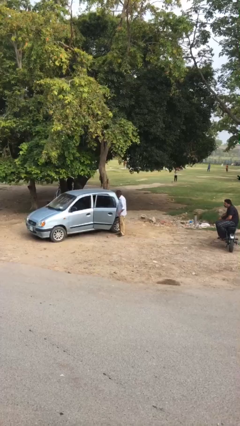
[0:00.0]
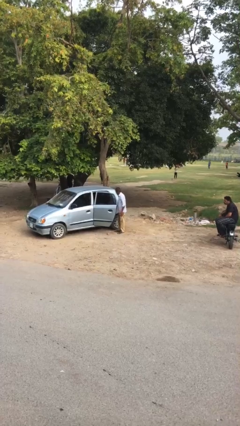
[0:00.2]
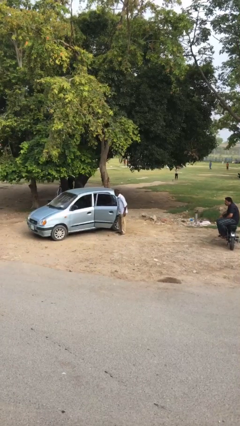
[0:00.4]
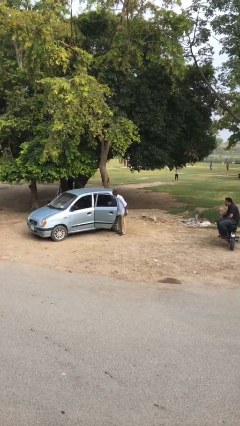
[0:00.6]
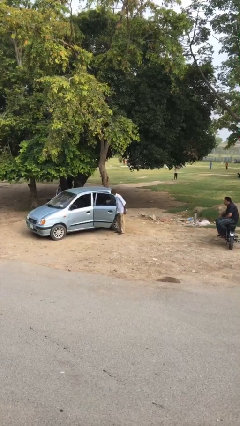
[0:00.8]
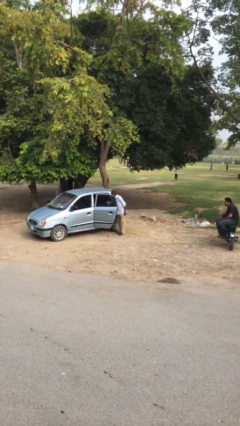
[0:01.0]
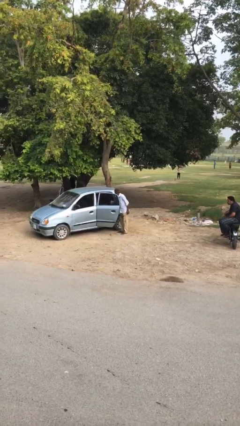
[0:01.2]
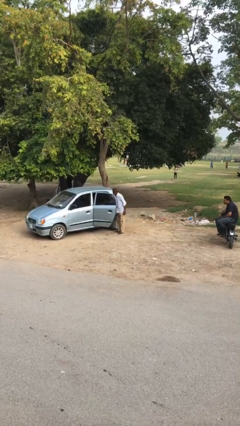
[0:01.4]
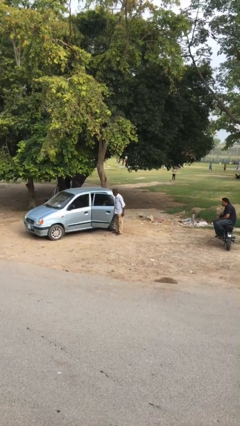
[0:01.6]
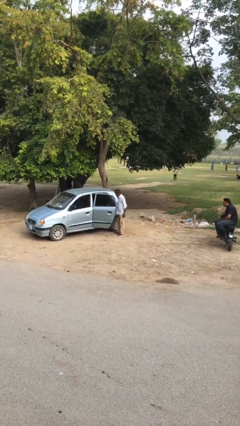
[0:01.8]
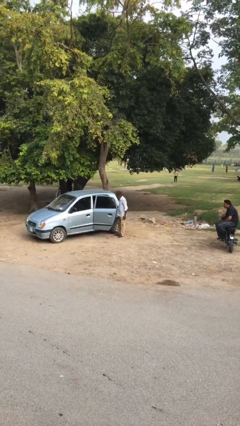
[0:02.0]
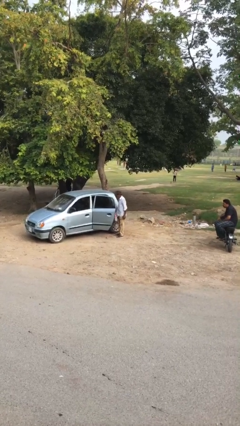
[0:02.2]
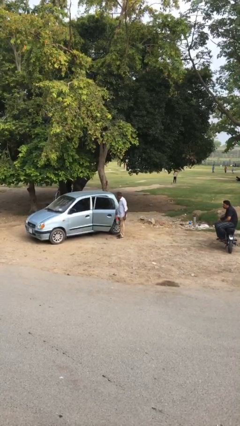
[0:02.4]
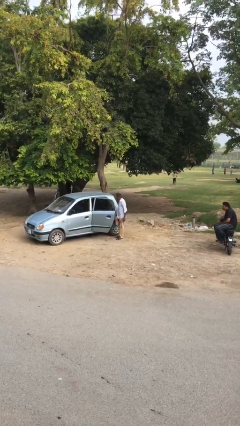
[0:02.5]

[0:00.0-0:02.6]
person unloads car

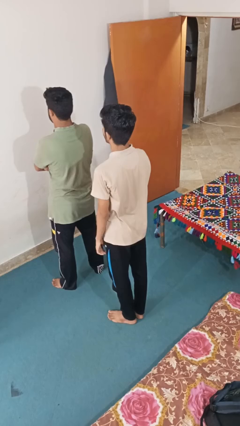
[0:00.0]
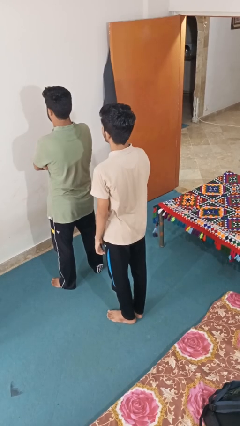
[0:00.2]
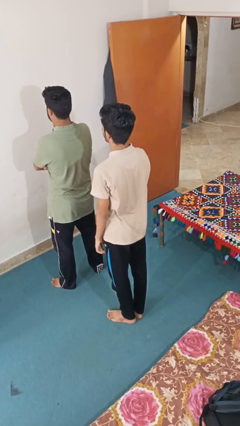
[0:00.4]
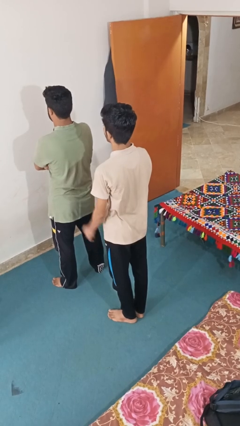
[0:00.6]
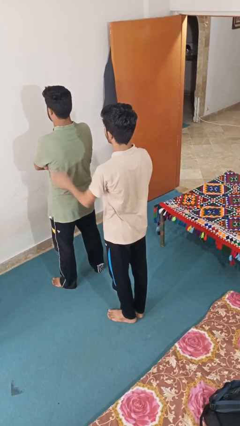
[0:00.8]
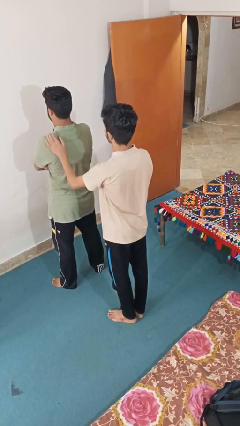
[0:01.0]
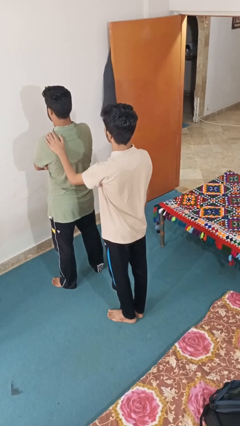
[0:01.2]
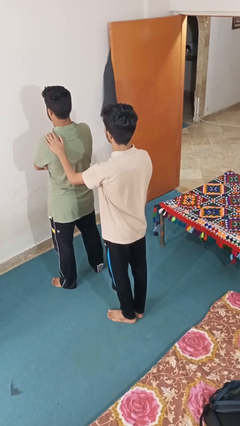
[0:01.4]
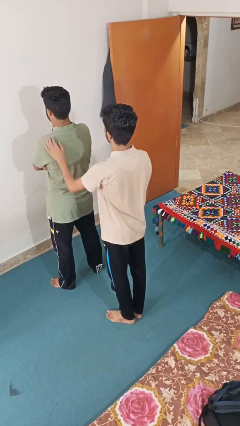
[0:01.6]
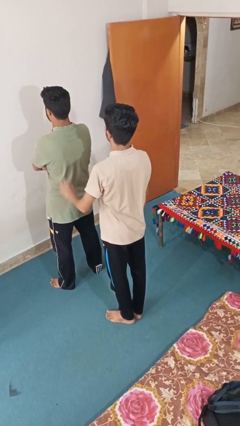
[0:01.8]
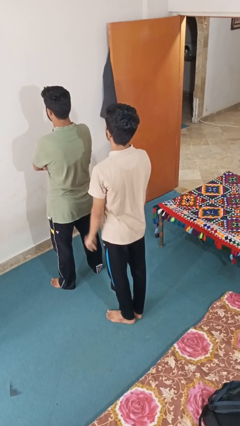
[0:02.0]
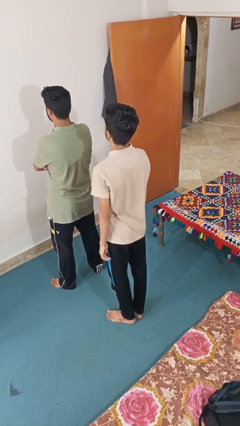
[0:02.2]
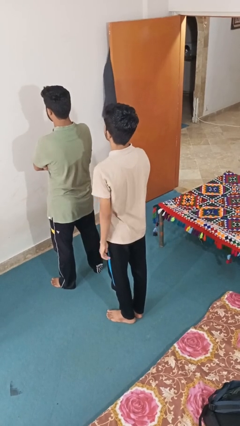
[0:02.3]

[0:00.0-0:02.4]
person touches back of person

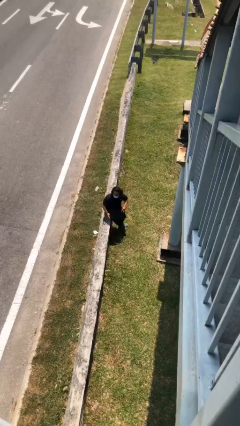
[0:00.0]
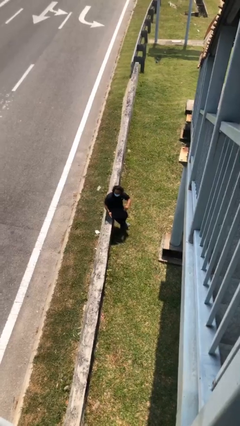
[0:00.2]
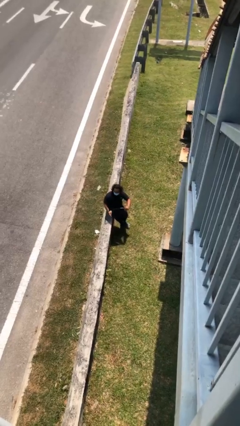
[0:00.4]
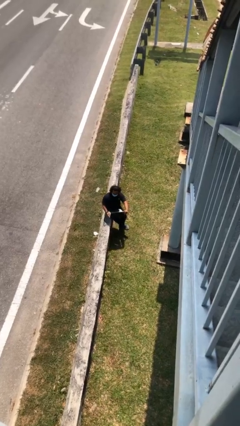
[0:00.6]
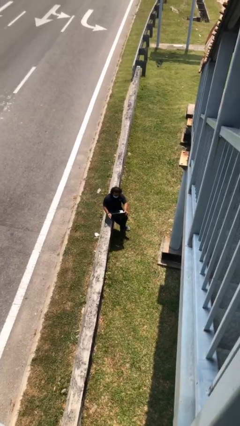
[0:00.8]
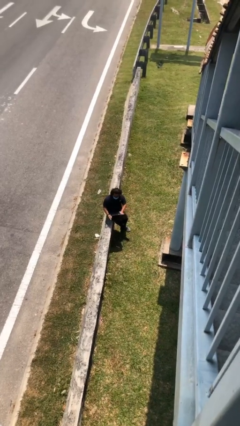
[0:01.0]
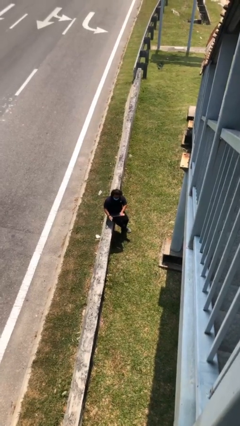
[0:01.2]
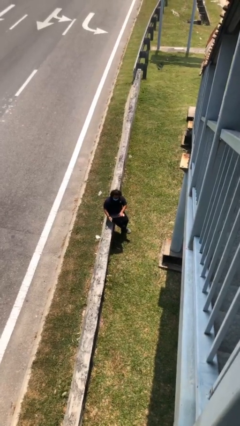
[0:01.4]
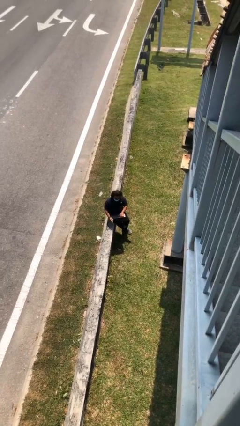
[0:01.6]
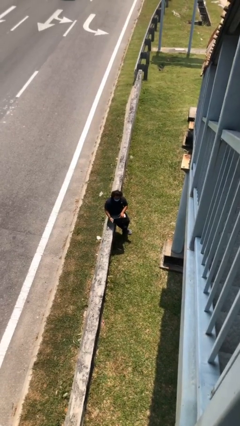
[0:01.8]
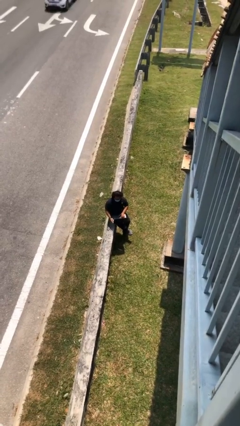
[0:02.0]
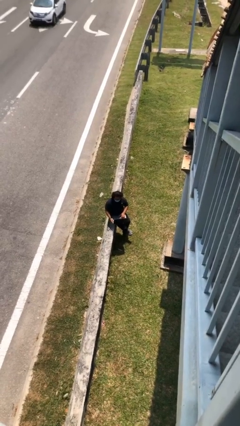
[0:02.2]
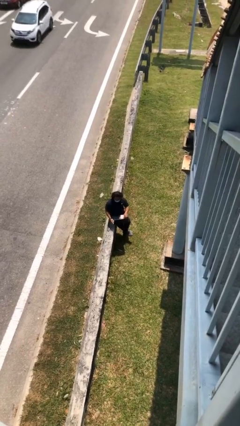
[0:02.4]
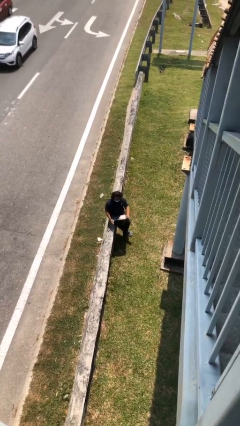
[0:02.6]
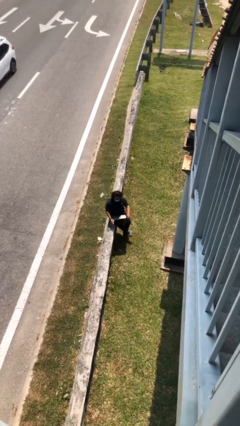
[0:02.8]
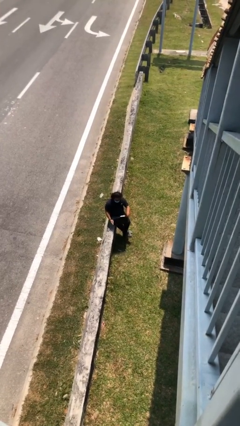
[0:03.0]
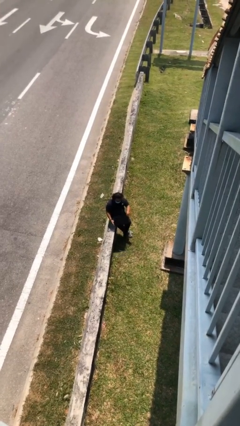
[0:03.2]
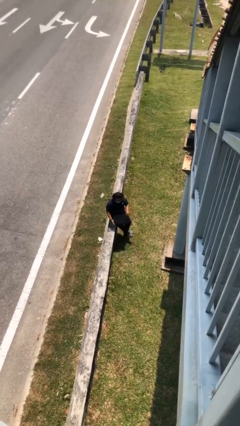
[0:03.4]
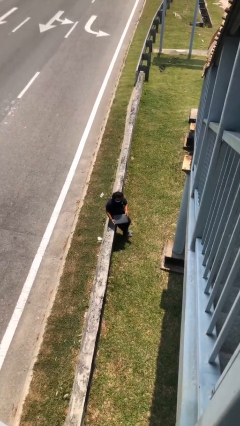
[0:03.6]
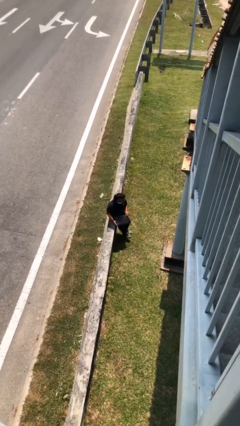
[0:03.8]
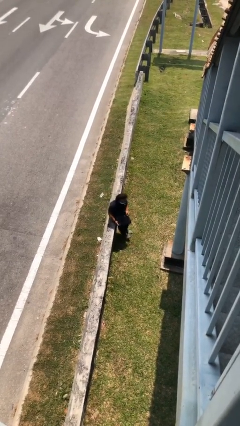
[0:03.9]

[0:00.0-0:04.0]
person interacts with laptop

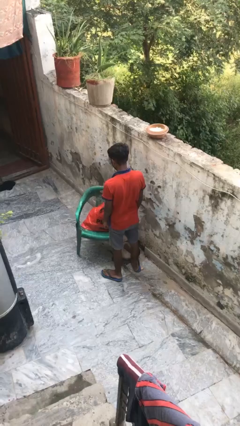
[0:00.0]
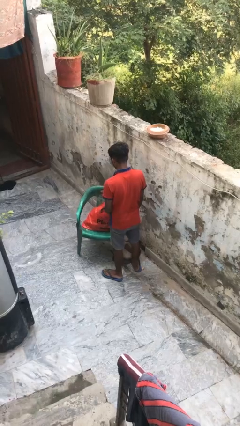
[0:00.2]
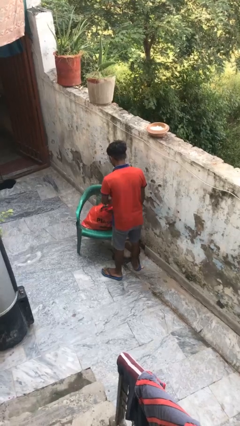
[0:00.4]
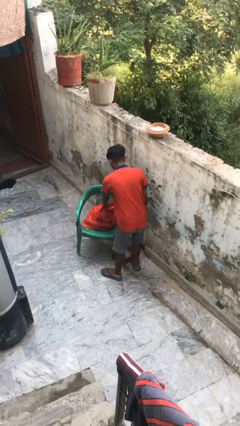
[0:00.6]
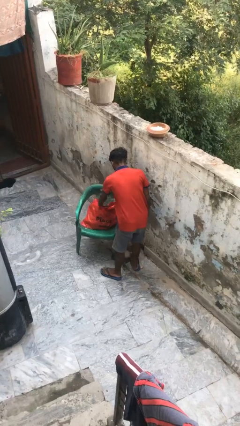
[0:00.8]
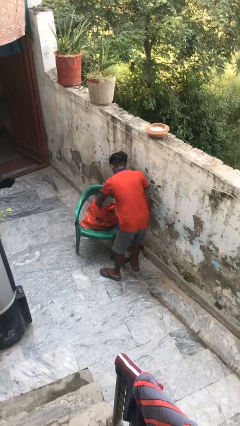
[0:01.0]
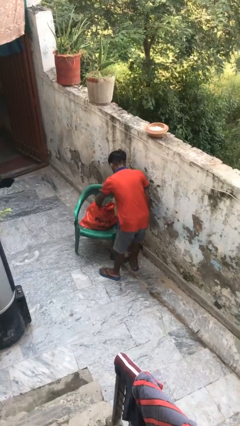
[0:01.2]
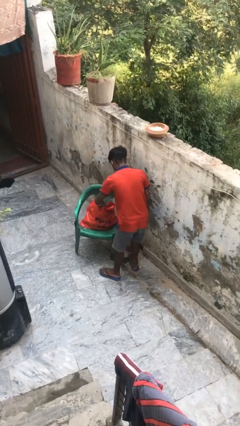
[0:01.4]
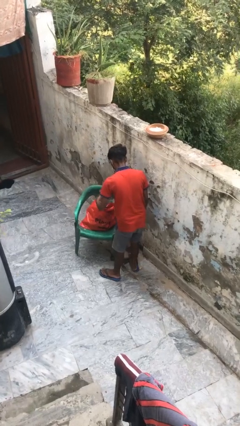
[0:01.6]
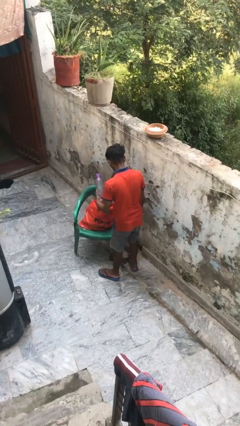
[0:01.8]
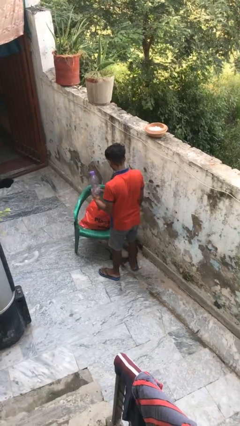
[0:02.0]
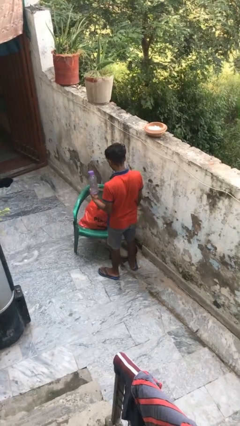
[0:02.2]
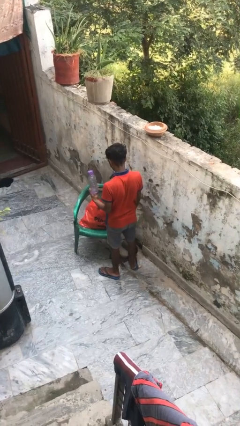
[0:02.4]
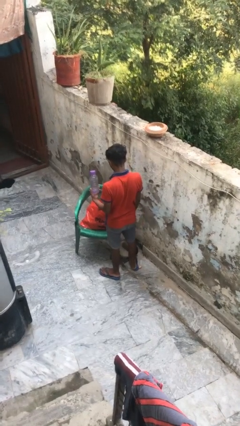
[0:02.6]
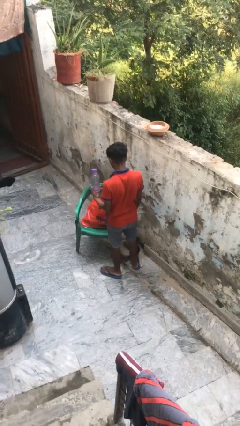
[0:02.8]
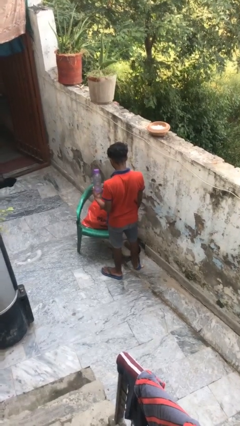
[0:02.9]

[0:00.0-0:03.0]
person takes object from bag

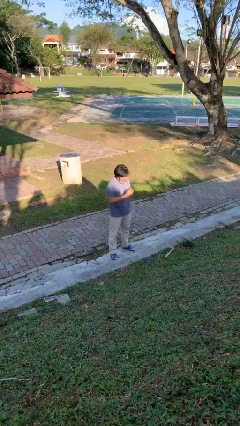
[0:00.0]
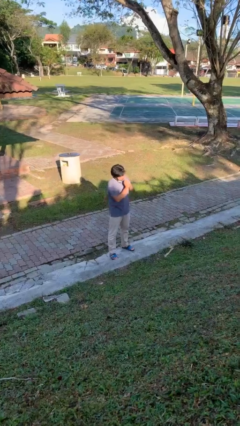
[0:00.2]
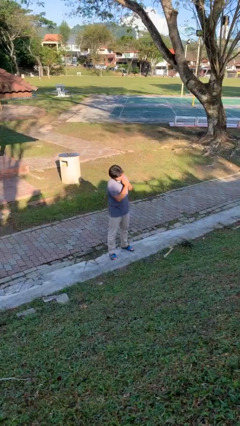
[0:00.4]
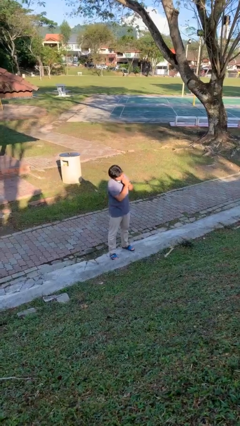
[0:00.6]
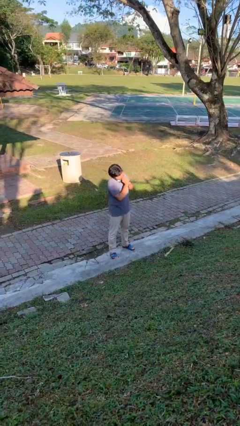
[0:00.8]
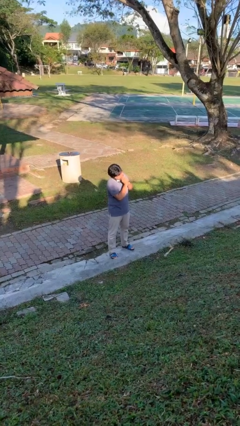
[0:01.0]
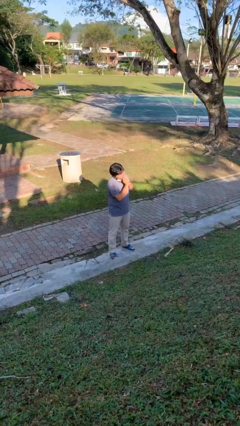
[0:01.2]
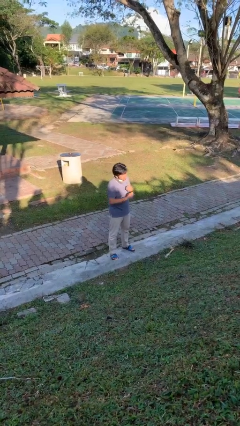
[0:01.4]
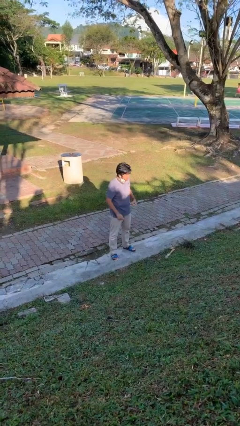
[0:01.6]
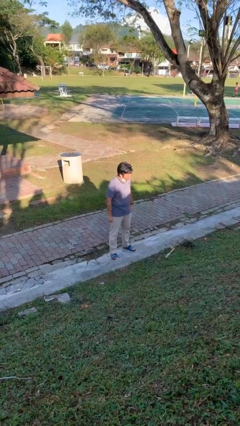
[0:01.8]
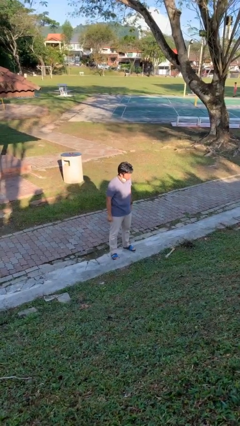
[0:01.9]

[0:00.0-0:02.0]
person flosses

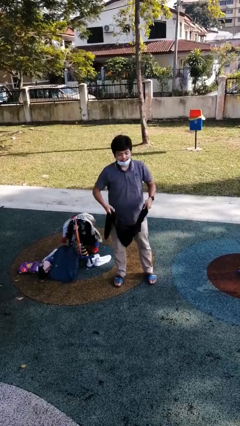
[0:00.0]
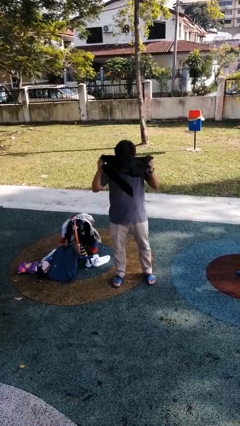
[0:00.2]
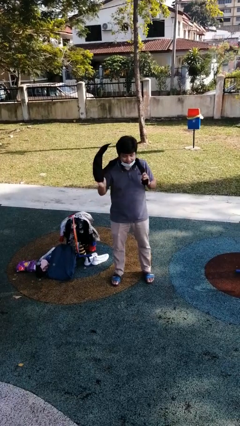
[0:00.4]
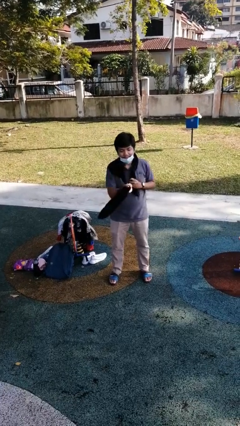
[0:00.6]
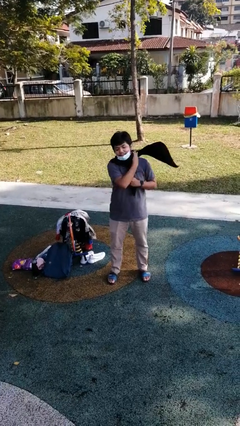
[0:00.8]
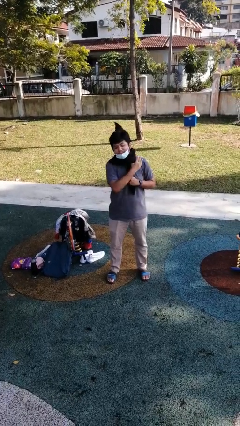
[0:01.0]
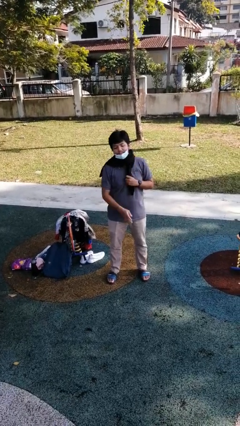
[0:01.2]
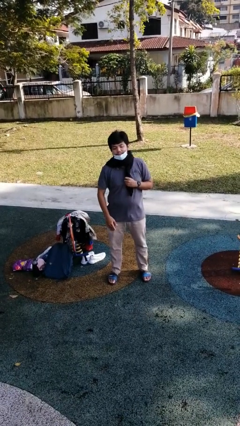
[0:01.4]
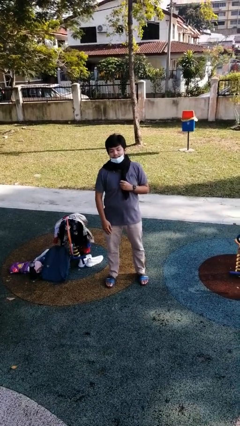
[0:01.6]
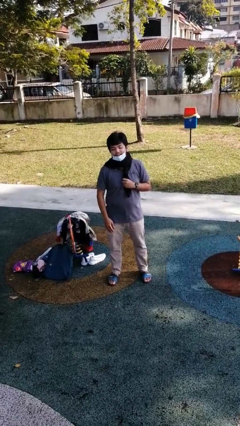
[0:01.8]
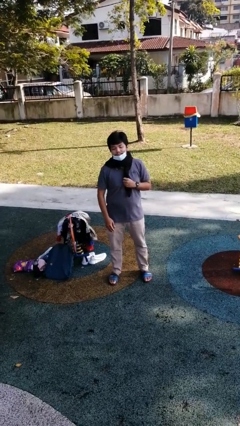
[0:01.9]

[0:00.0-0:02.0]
person puts on scarf

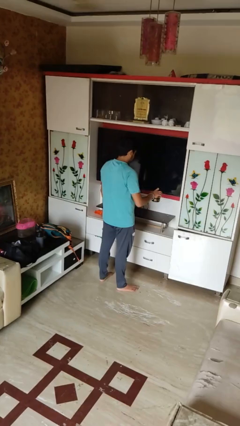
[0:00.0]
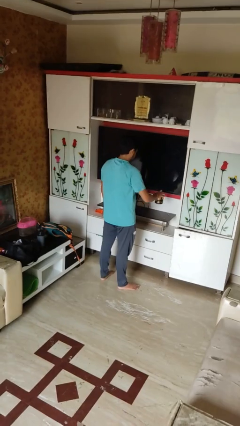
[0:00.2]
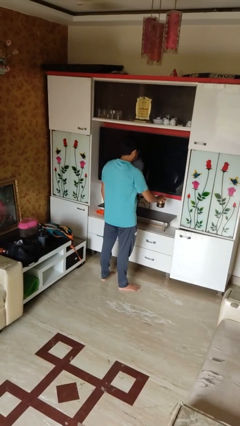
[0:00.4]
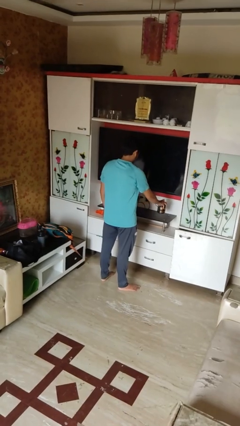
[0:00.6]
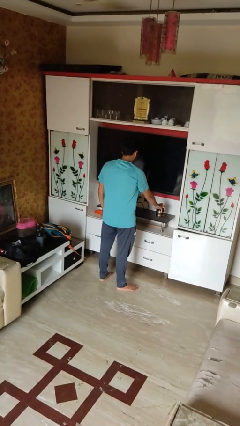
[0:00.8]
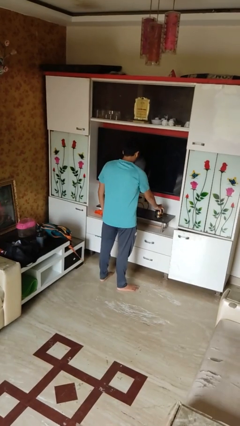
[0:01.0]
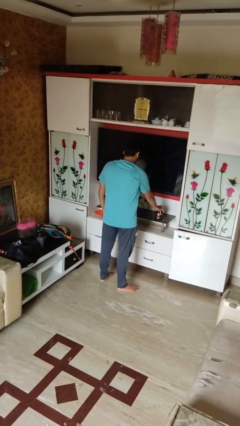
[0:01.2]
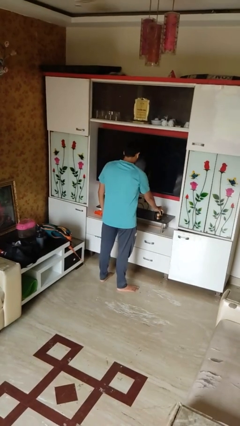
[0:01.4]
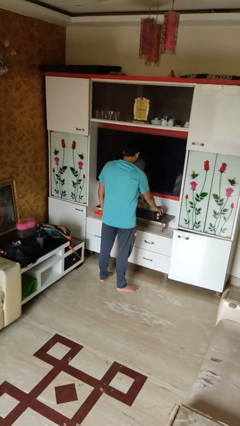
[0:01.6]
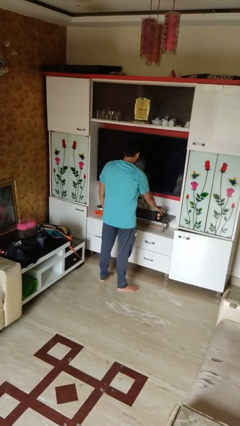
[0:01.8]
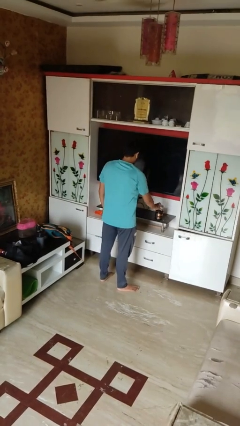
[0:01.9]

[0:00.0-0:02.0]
person puts down object on countertop
